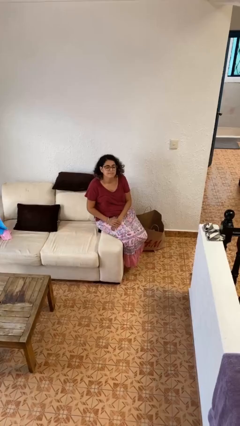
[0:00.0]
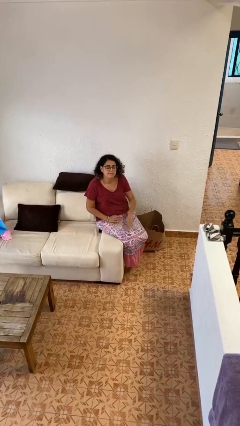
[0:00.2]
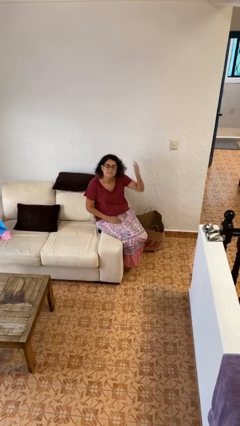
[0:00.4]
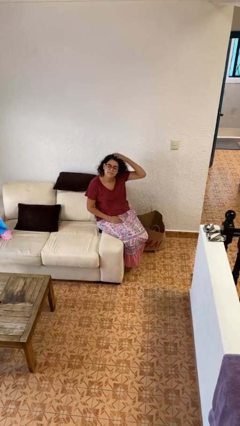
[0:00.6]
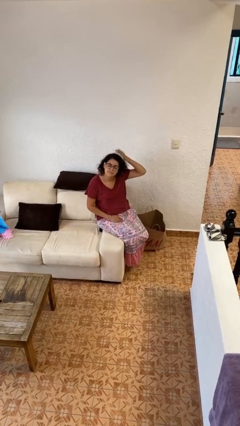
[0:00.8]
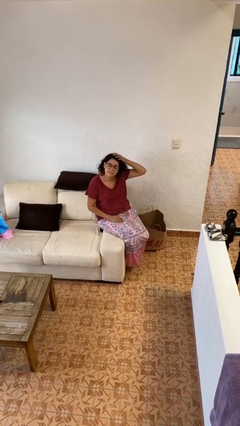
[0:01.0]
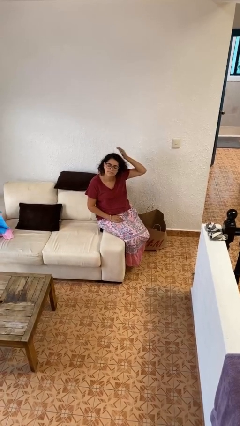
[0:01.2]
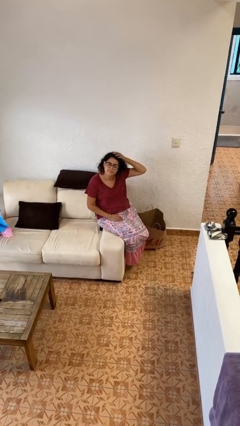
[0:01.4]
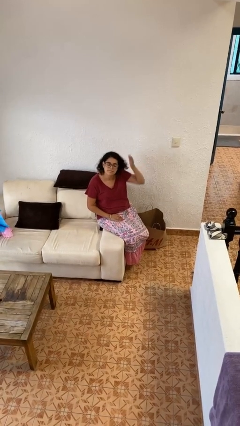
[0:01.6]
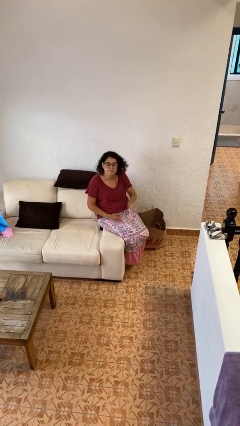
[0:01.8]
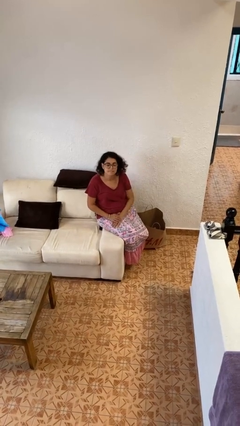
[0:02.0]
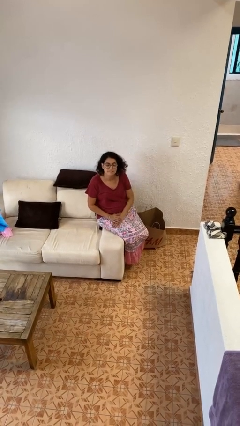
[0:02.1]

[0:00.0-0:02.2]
person pats head

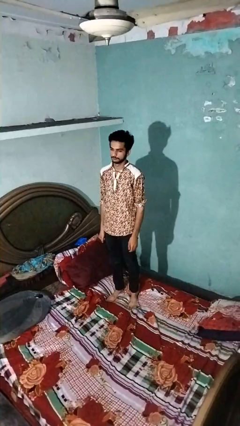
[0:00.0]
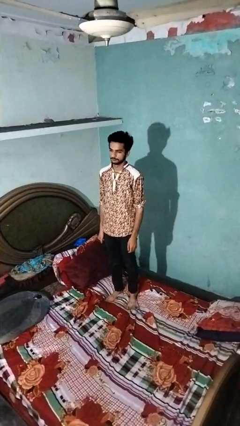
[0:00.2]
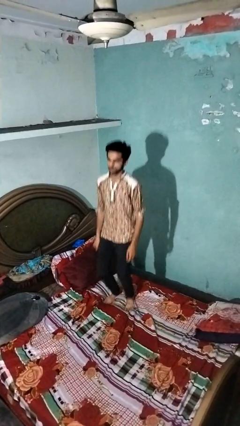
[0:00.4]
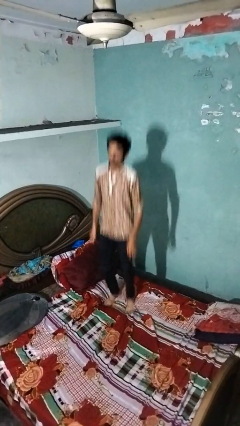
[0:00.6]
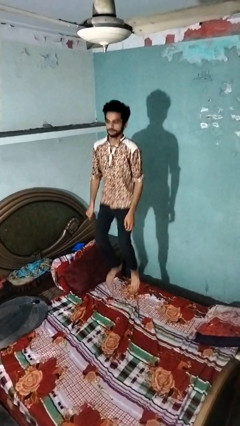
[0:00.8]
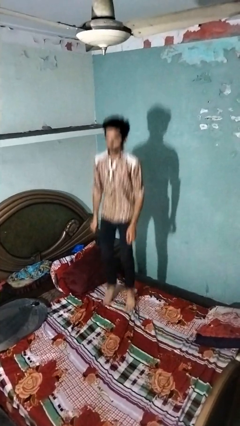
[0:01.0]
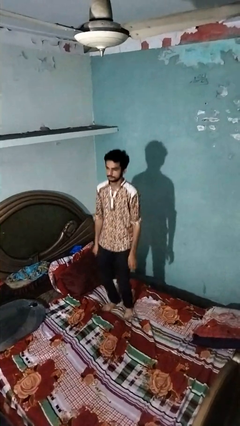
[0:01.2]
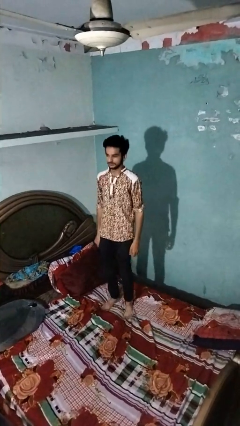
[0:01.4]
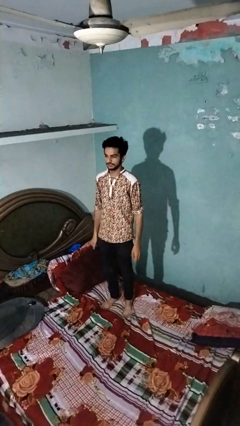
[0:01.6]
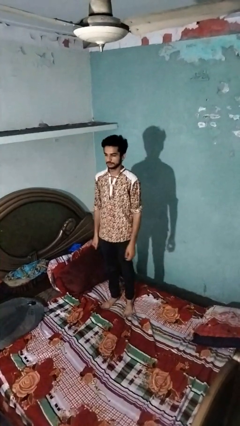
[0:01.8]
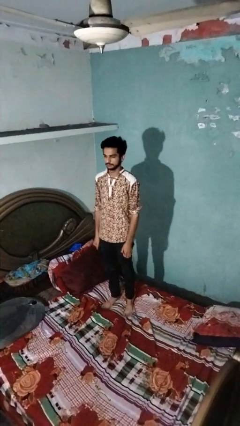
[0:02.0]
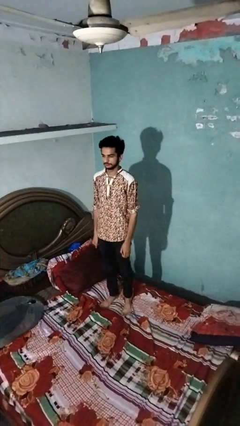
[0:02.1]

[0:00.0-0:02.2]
person jumps on bed

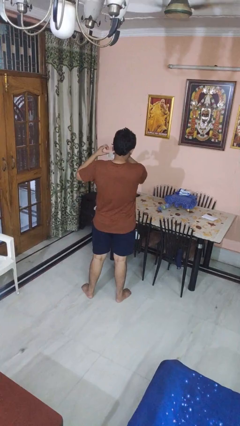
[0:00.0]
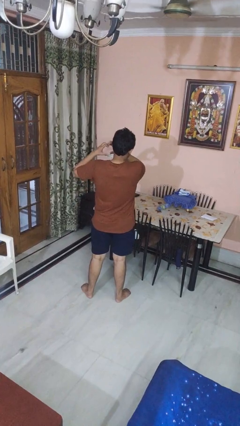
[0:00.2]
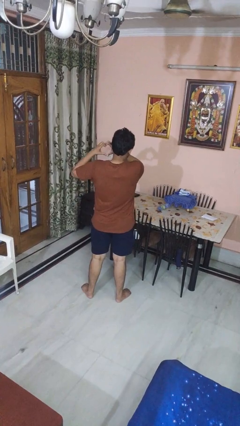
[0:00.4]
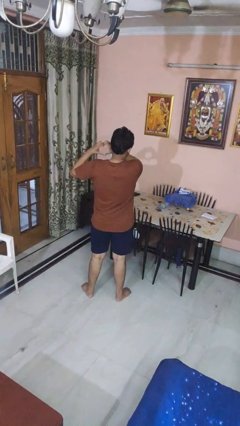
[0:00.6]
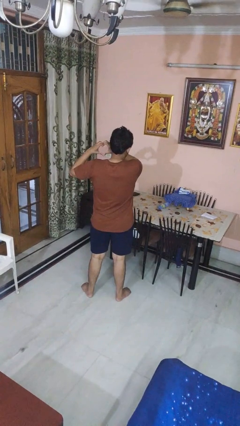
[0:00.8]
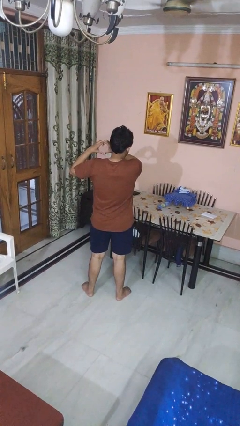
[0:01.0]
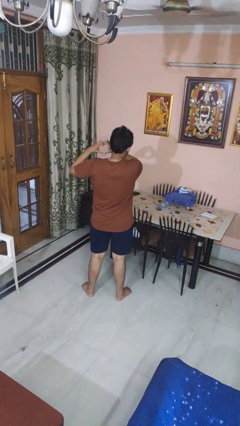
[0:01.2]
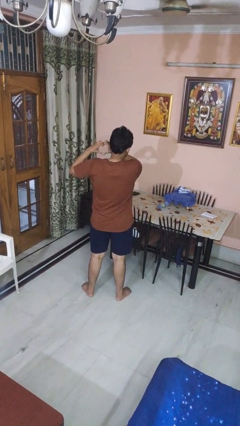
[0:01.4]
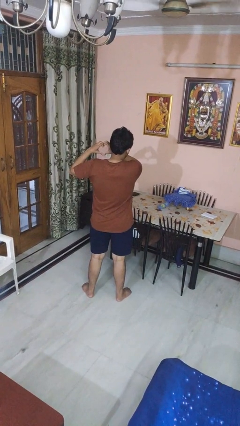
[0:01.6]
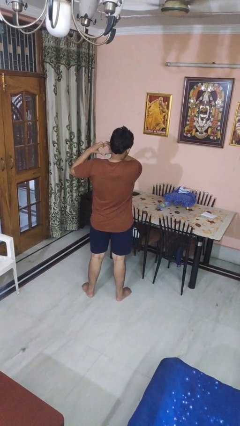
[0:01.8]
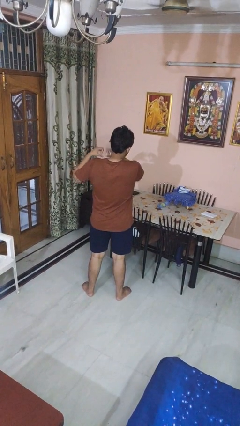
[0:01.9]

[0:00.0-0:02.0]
person gestures heart

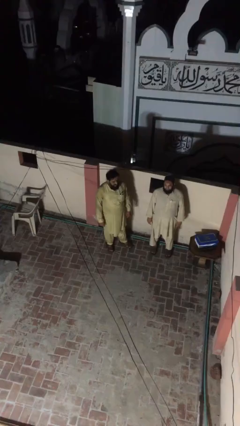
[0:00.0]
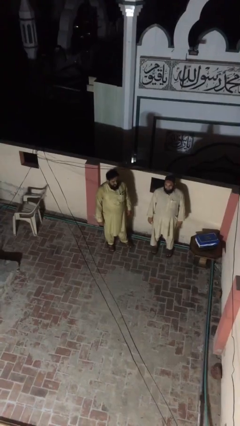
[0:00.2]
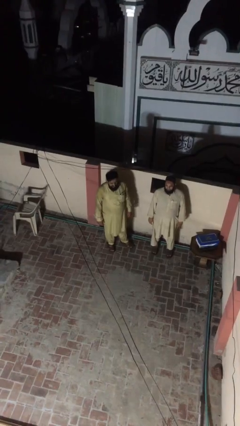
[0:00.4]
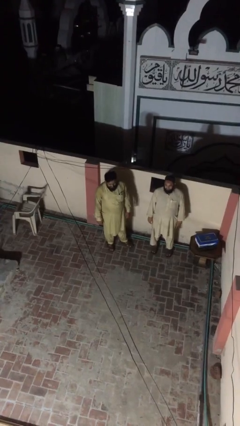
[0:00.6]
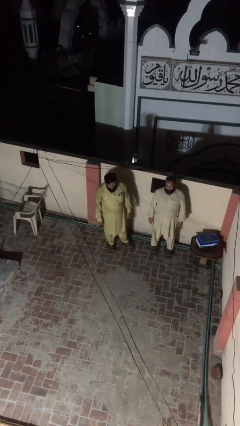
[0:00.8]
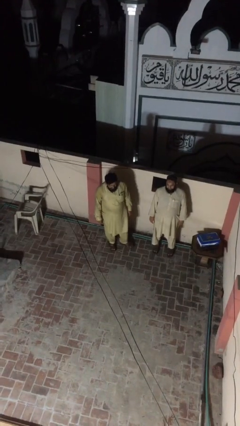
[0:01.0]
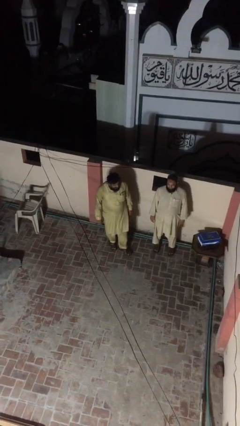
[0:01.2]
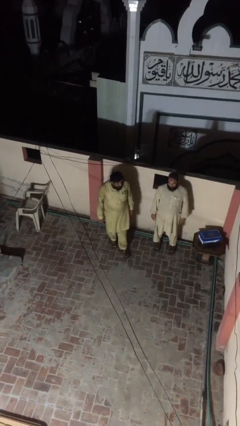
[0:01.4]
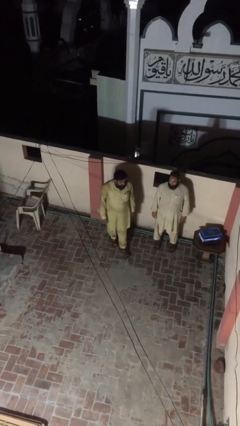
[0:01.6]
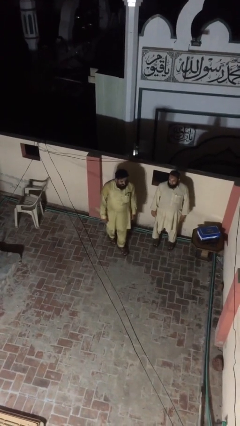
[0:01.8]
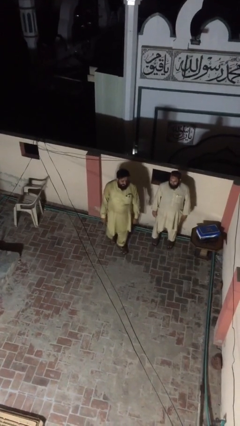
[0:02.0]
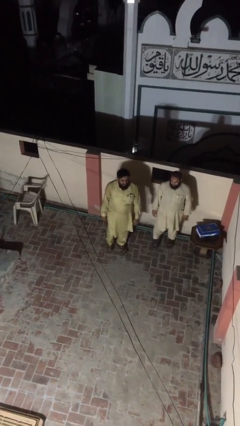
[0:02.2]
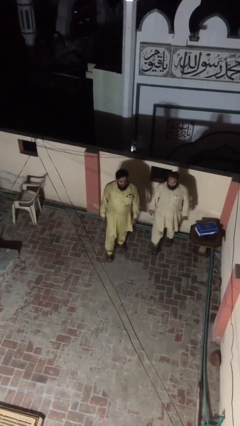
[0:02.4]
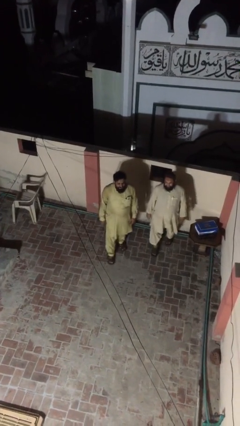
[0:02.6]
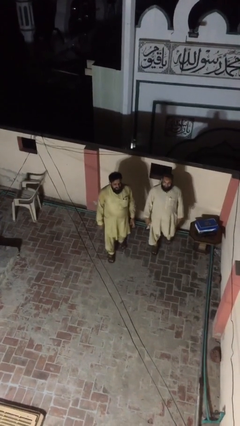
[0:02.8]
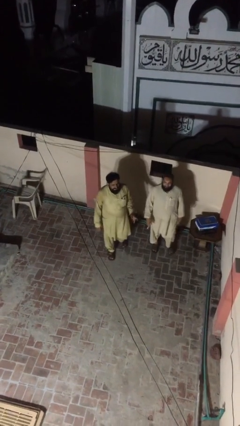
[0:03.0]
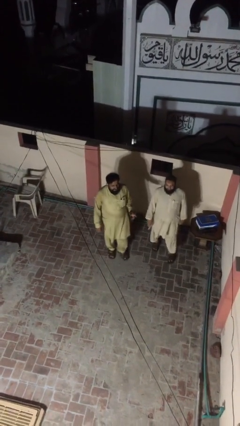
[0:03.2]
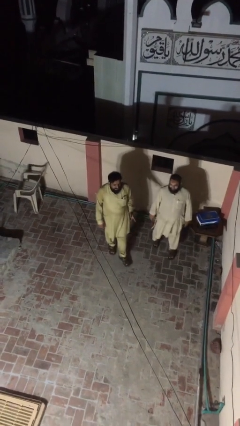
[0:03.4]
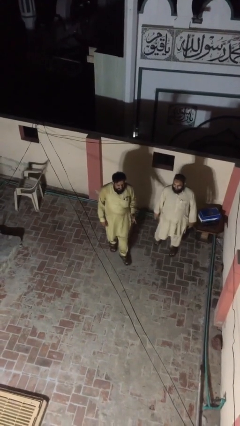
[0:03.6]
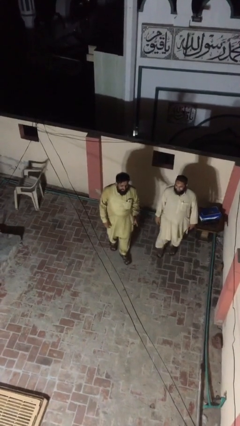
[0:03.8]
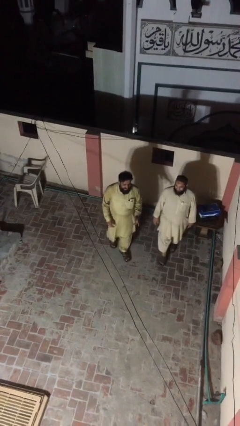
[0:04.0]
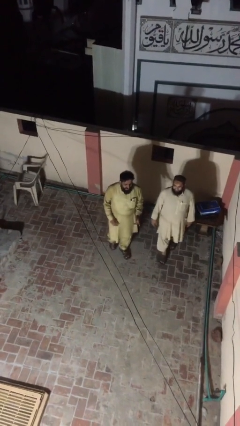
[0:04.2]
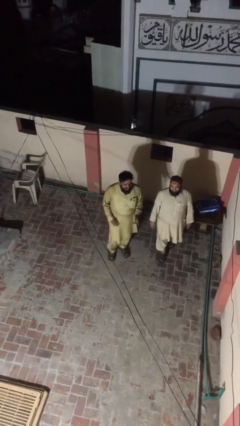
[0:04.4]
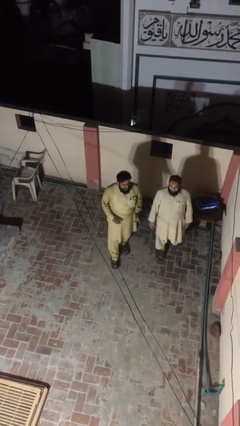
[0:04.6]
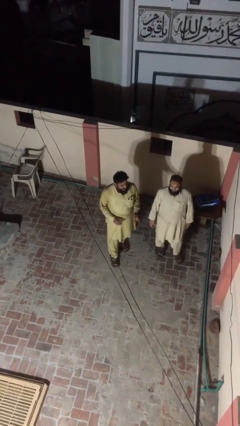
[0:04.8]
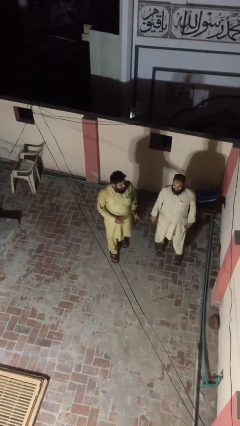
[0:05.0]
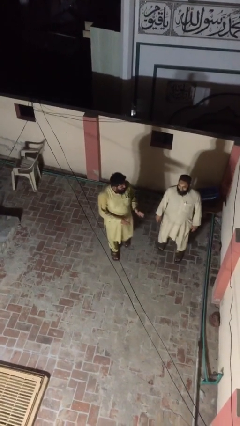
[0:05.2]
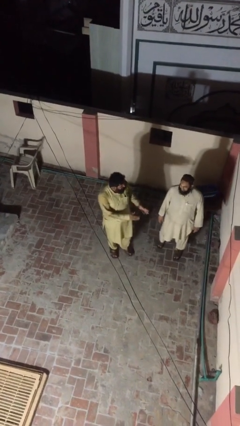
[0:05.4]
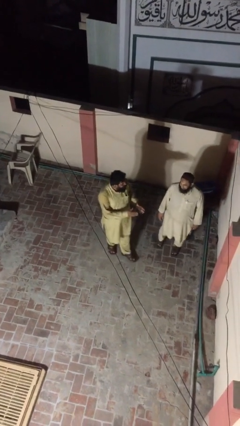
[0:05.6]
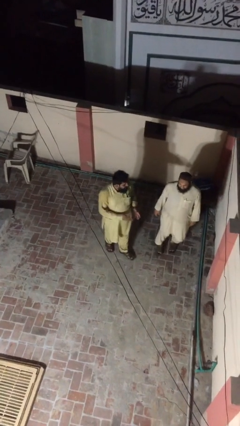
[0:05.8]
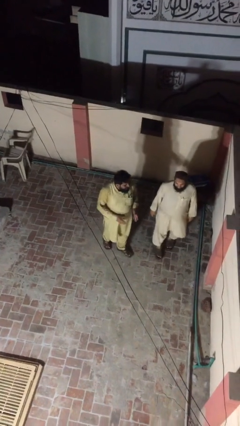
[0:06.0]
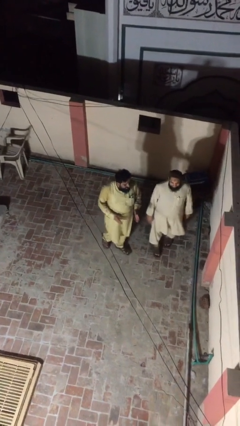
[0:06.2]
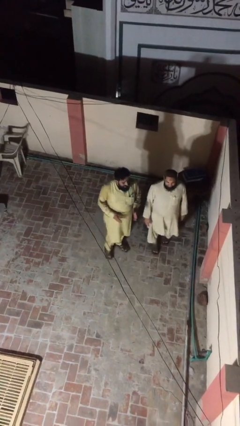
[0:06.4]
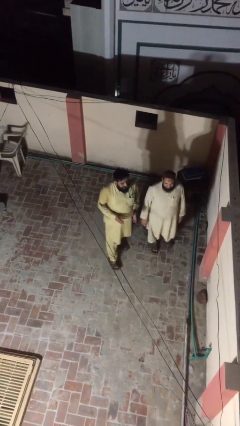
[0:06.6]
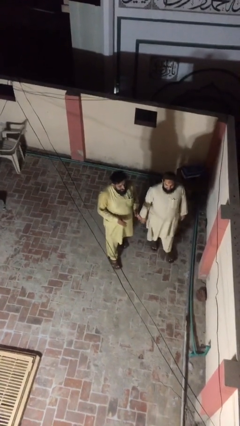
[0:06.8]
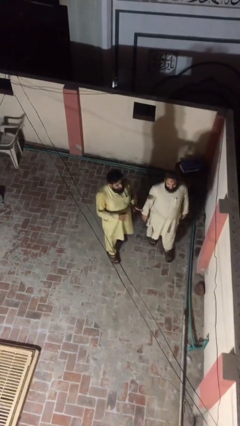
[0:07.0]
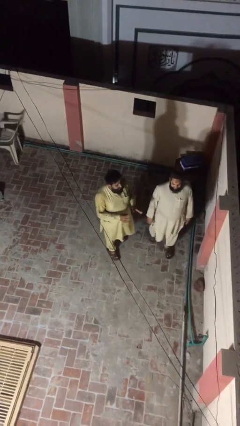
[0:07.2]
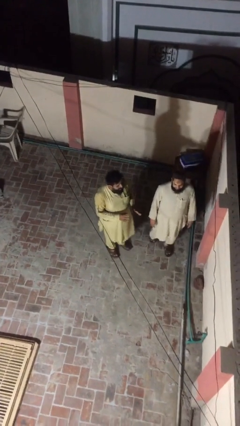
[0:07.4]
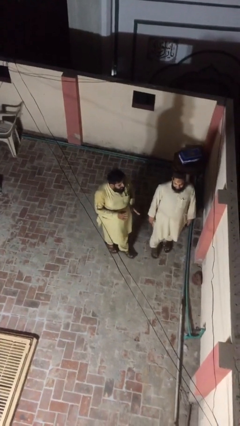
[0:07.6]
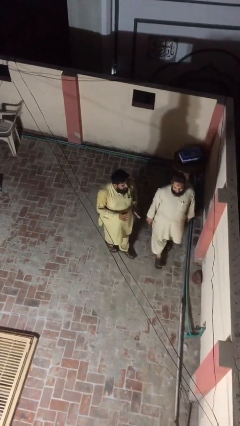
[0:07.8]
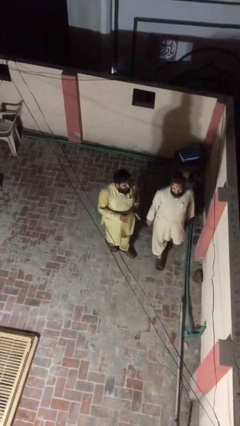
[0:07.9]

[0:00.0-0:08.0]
person talks to person

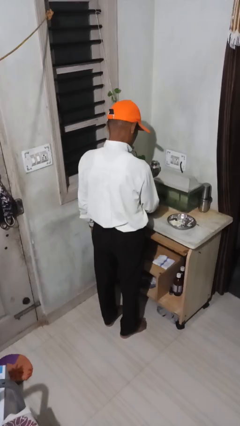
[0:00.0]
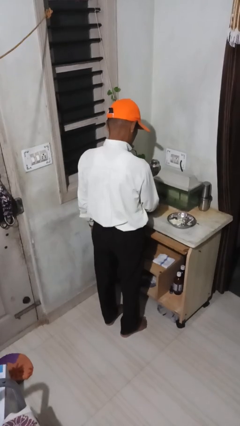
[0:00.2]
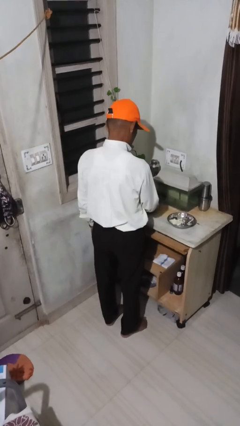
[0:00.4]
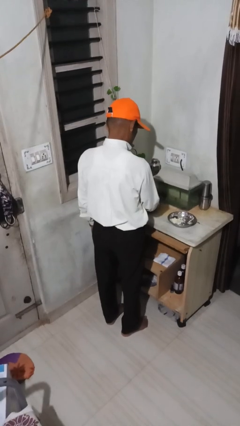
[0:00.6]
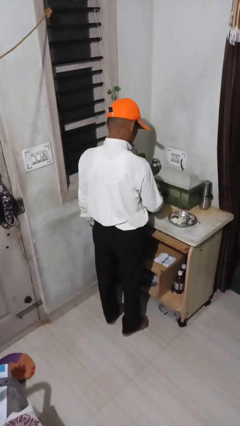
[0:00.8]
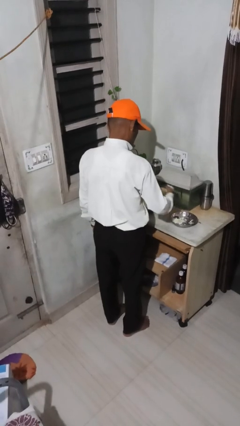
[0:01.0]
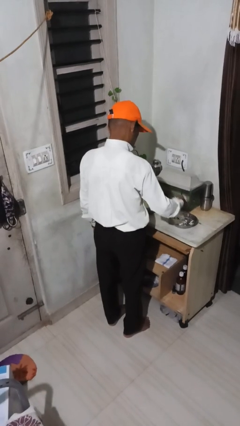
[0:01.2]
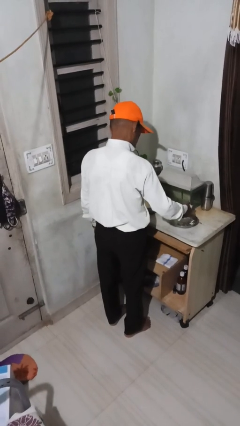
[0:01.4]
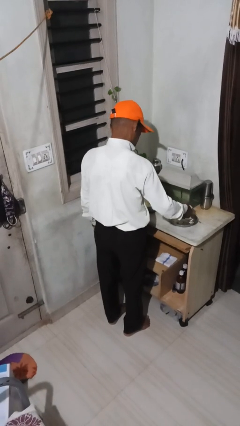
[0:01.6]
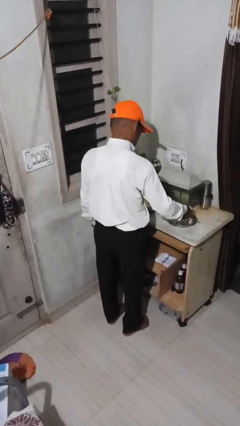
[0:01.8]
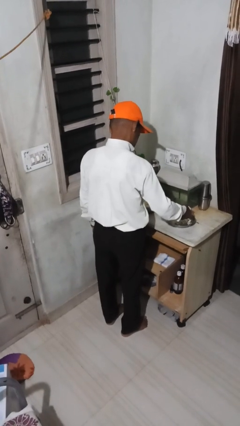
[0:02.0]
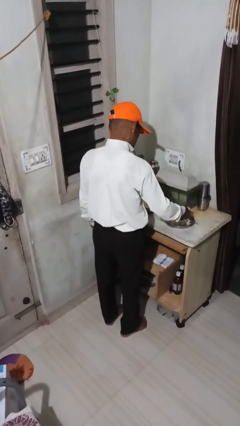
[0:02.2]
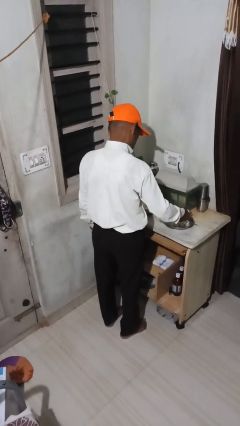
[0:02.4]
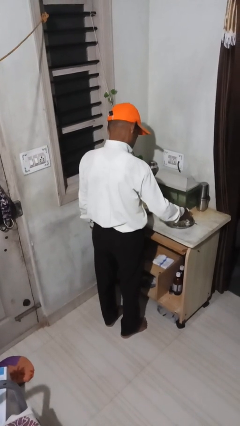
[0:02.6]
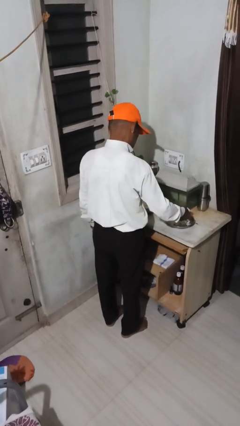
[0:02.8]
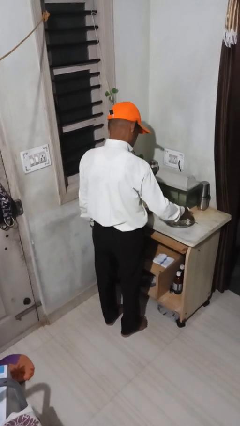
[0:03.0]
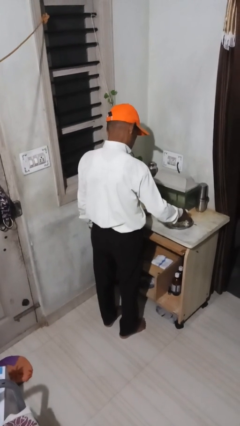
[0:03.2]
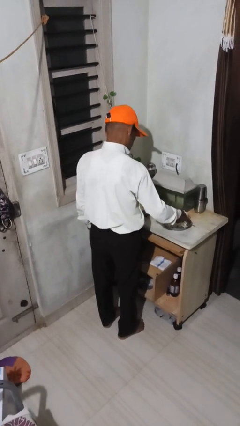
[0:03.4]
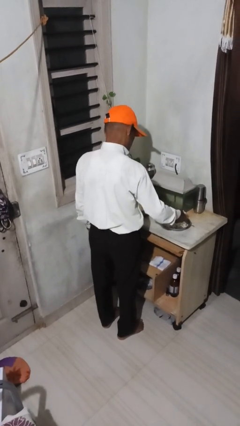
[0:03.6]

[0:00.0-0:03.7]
person pours into bowl
